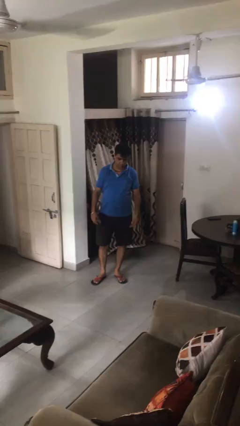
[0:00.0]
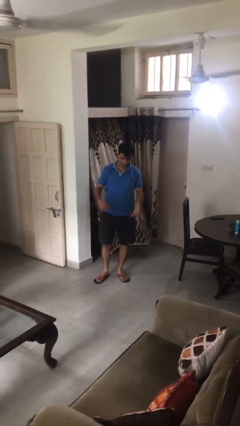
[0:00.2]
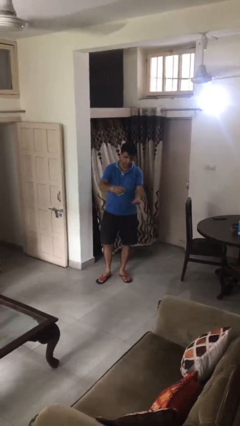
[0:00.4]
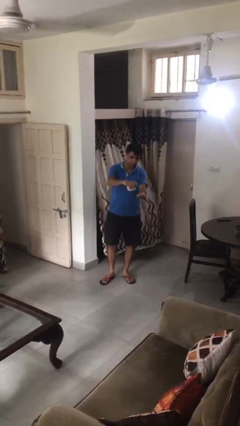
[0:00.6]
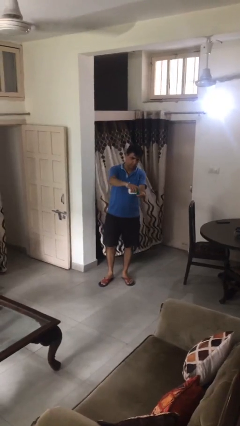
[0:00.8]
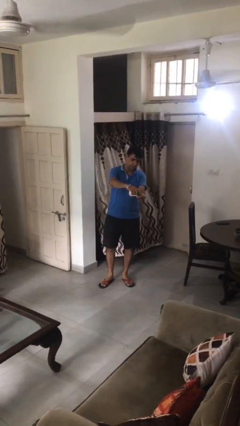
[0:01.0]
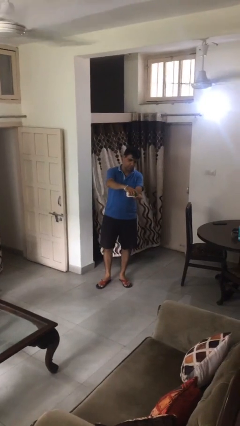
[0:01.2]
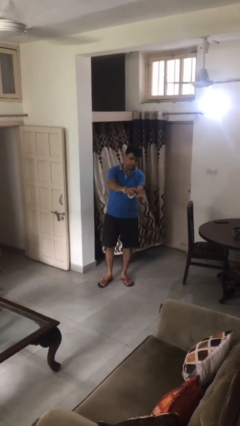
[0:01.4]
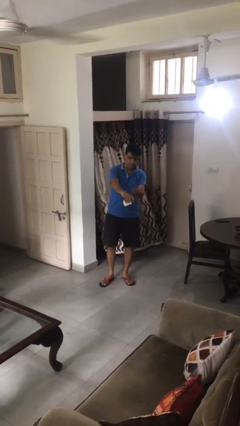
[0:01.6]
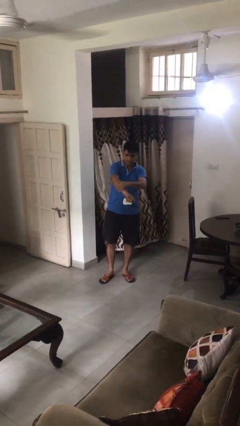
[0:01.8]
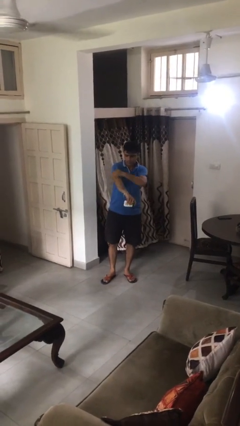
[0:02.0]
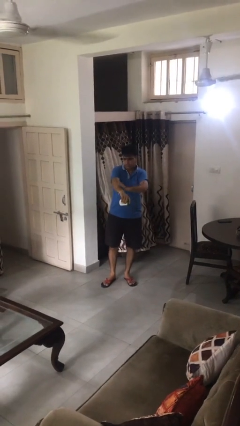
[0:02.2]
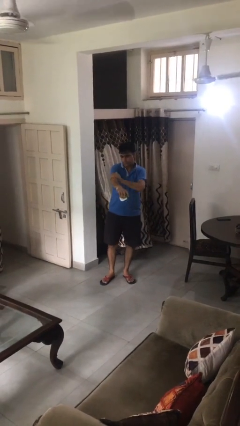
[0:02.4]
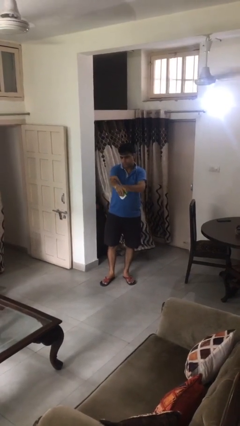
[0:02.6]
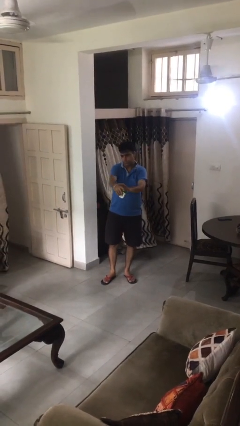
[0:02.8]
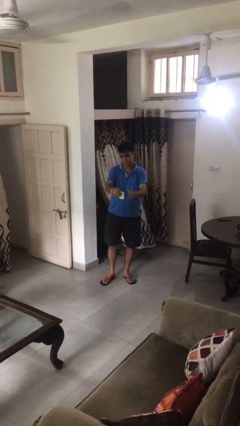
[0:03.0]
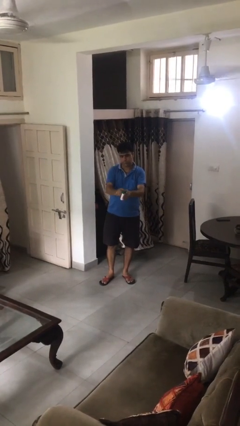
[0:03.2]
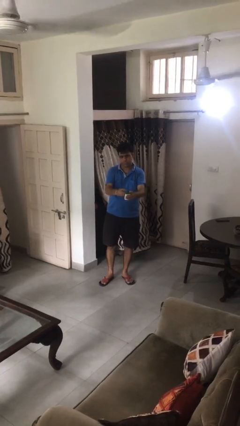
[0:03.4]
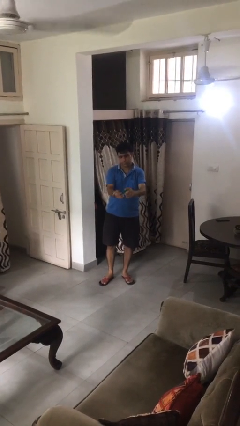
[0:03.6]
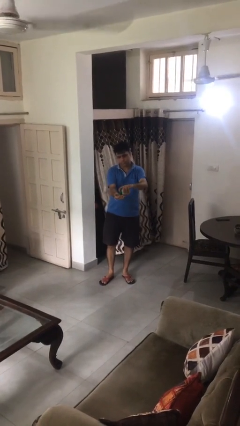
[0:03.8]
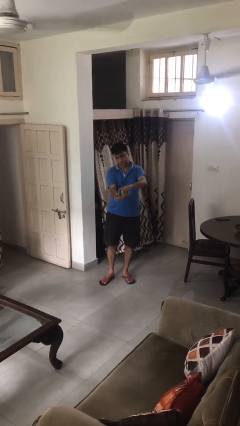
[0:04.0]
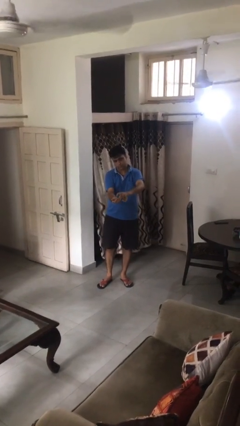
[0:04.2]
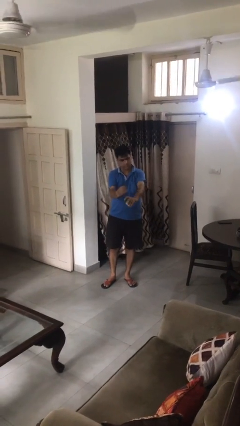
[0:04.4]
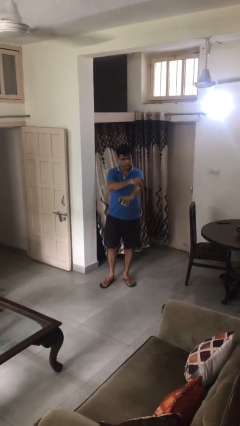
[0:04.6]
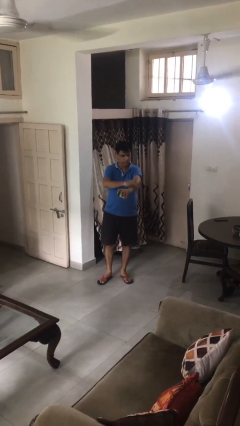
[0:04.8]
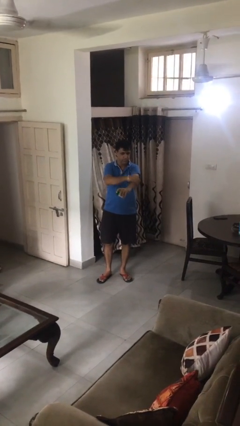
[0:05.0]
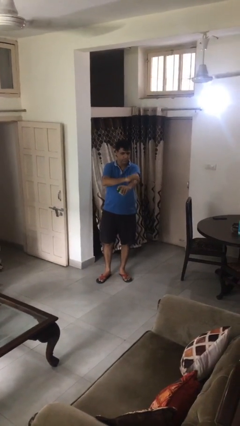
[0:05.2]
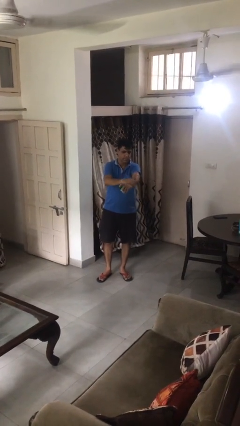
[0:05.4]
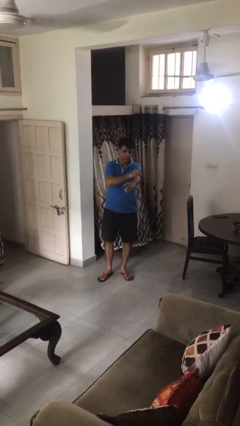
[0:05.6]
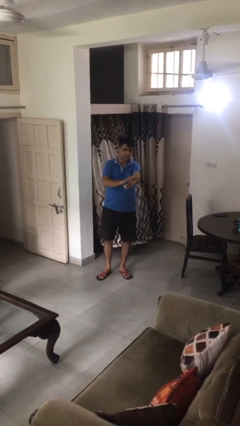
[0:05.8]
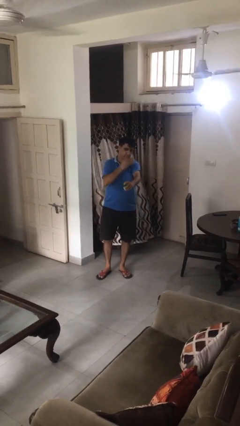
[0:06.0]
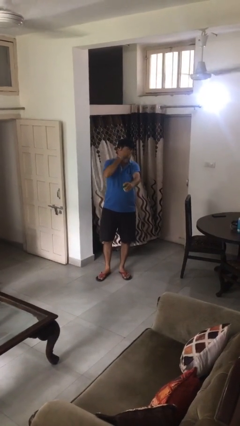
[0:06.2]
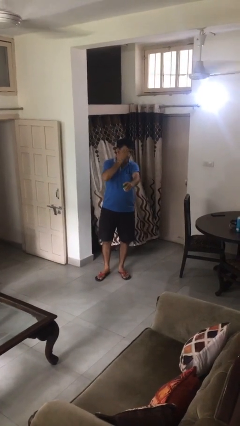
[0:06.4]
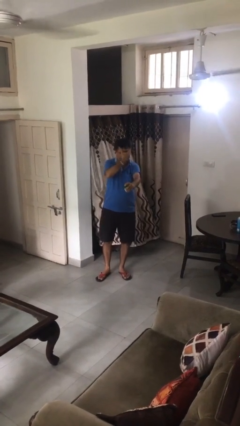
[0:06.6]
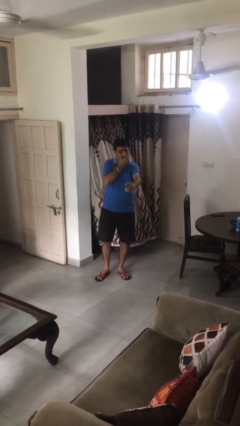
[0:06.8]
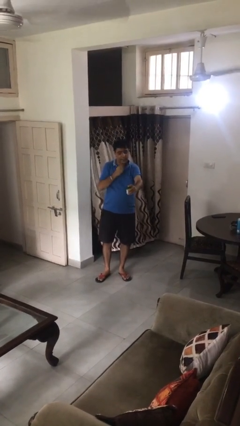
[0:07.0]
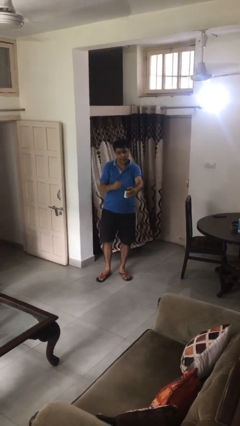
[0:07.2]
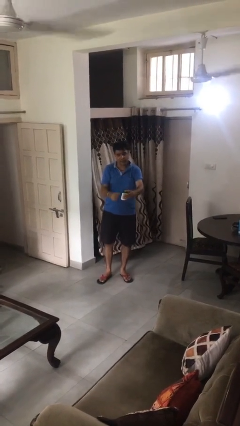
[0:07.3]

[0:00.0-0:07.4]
person applies sunscreen

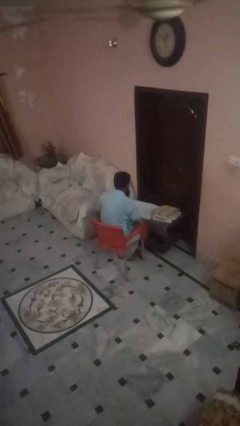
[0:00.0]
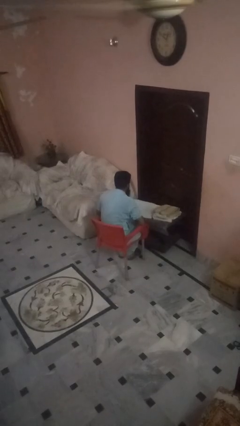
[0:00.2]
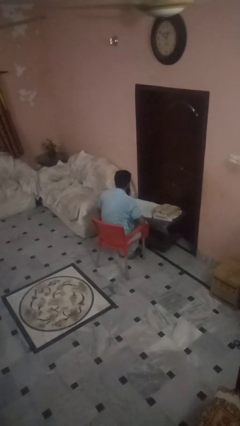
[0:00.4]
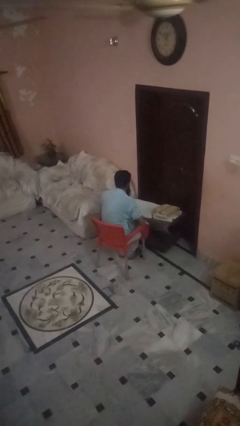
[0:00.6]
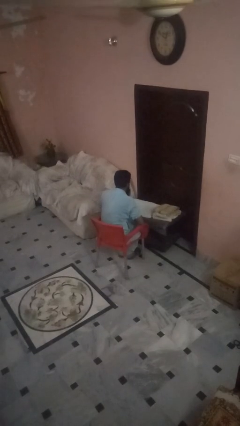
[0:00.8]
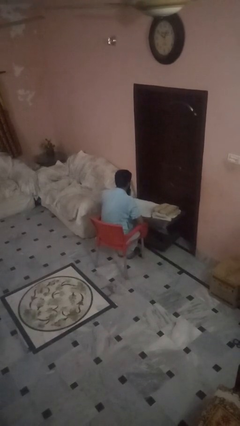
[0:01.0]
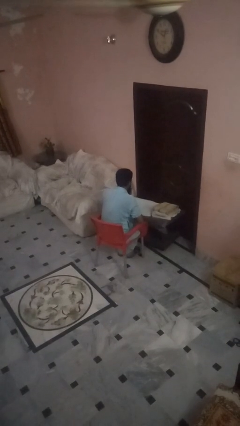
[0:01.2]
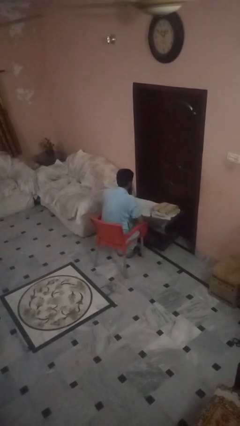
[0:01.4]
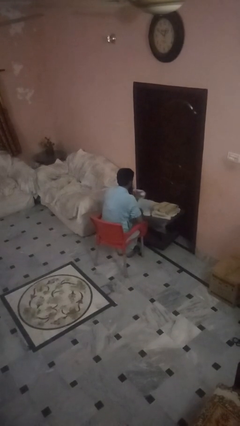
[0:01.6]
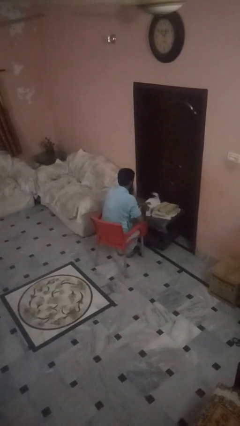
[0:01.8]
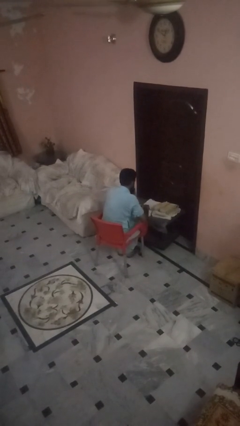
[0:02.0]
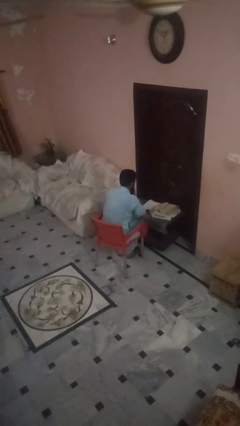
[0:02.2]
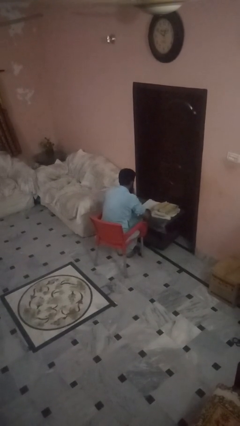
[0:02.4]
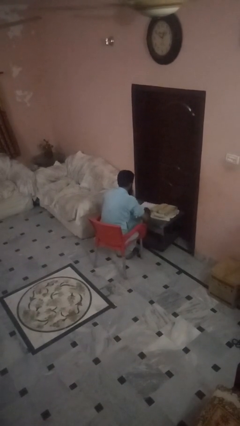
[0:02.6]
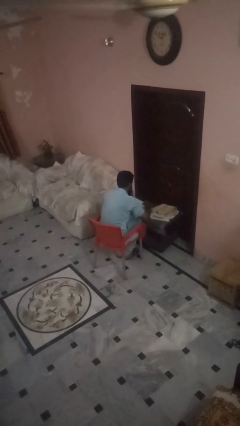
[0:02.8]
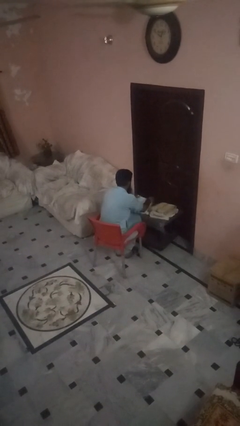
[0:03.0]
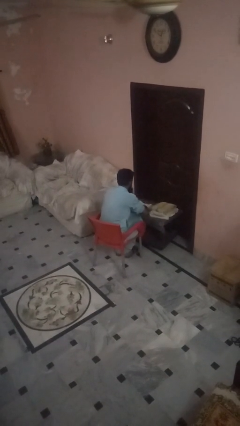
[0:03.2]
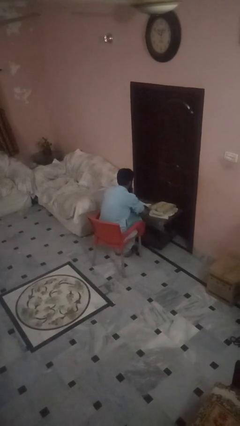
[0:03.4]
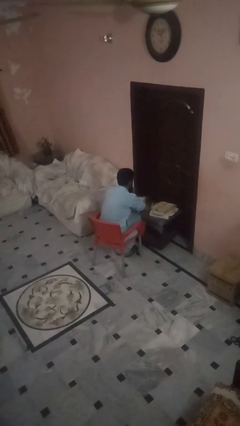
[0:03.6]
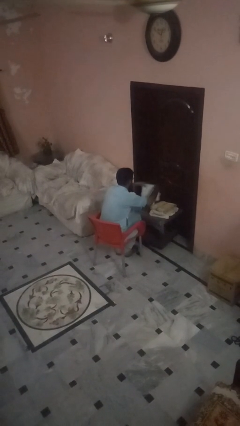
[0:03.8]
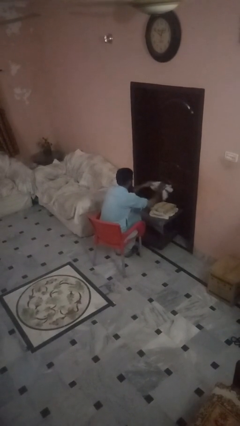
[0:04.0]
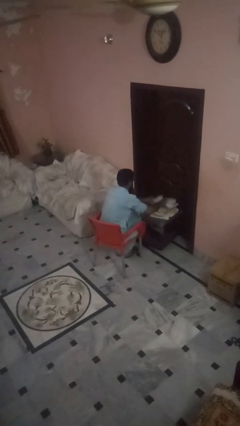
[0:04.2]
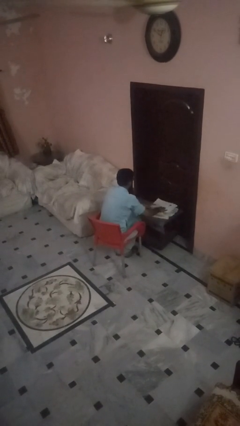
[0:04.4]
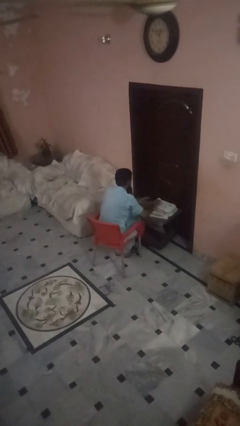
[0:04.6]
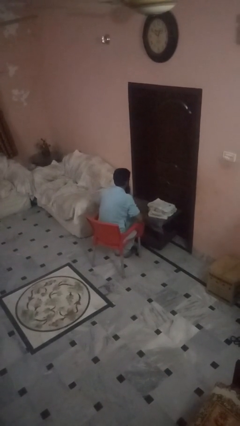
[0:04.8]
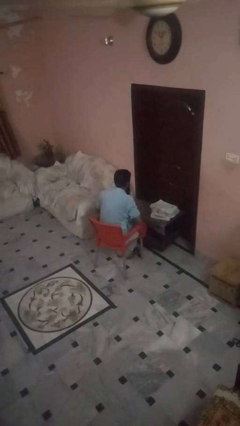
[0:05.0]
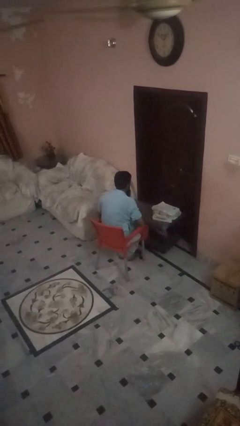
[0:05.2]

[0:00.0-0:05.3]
person folds towel

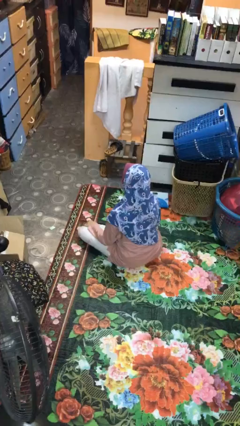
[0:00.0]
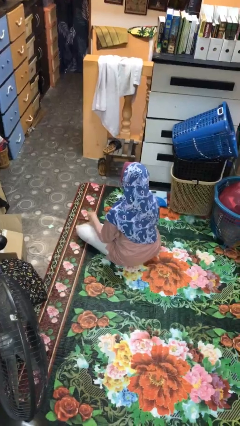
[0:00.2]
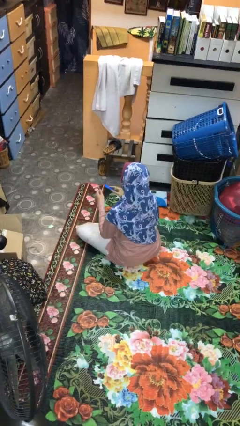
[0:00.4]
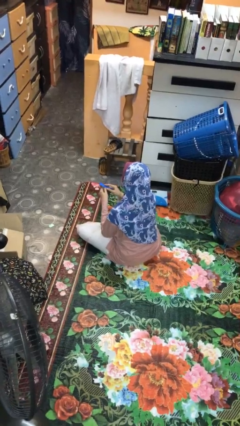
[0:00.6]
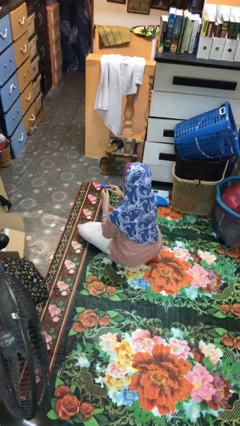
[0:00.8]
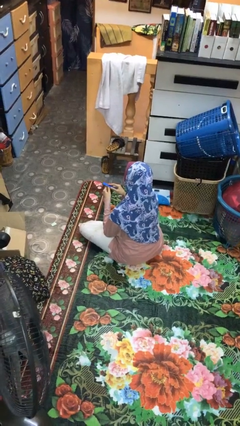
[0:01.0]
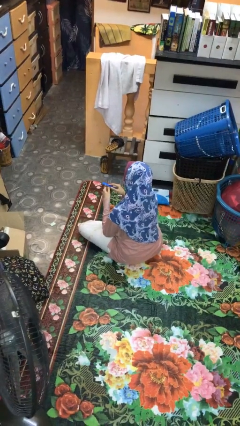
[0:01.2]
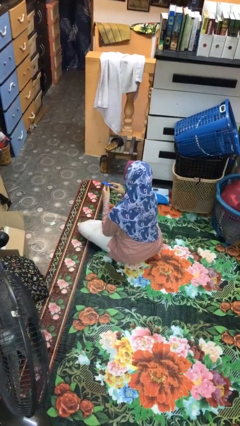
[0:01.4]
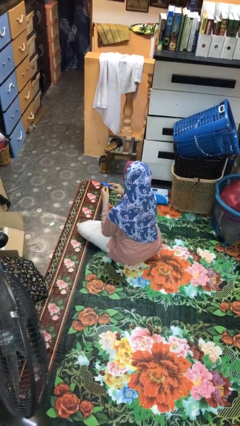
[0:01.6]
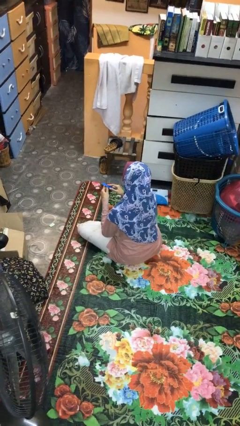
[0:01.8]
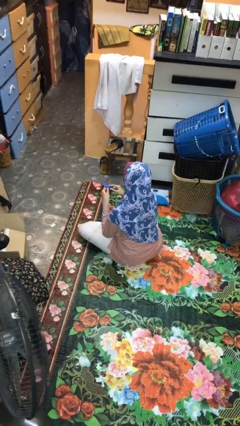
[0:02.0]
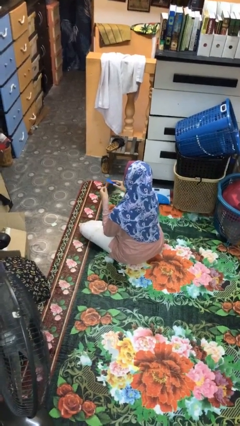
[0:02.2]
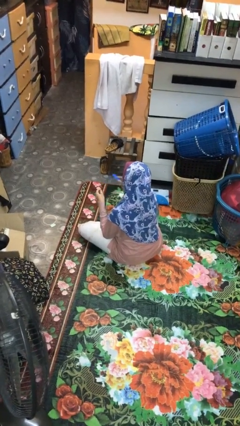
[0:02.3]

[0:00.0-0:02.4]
person files fingernails

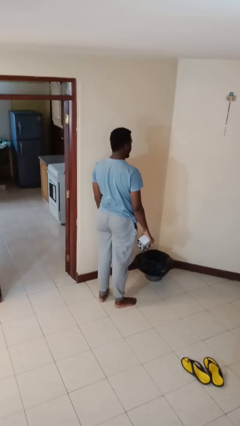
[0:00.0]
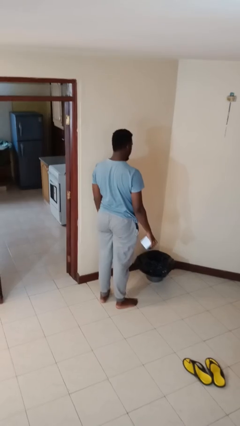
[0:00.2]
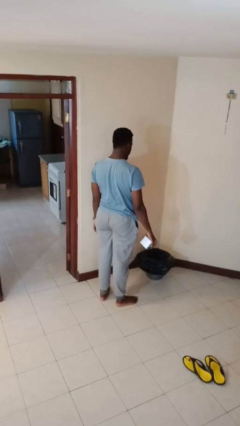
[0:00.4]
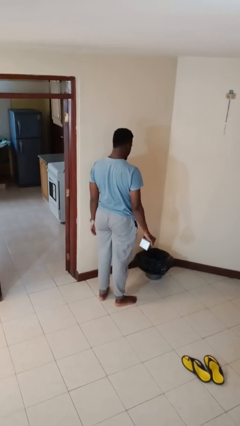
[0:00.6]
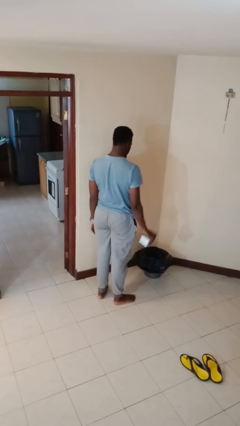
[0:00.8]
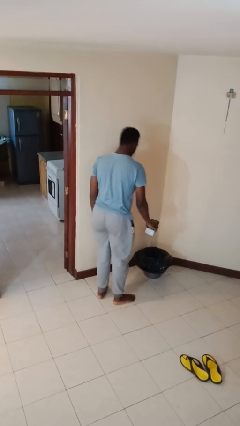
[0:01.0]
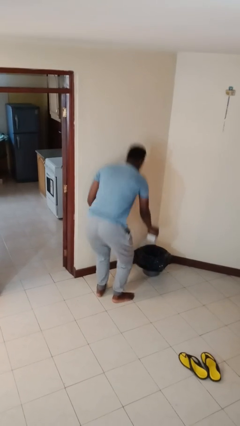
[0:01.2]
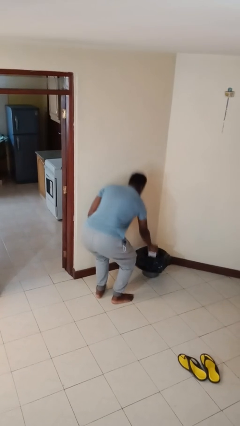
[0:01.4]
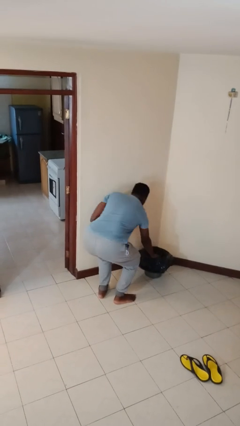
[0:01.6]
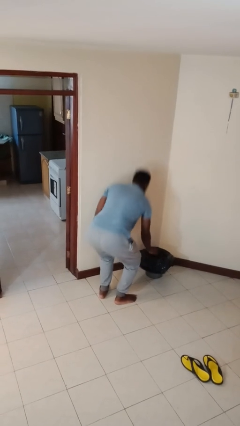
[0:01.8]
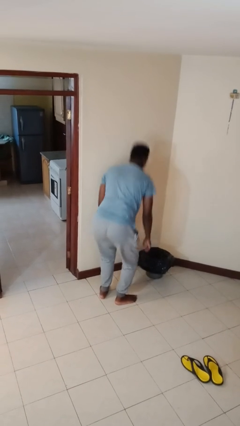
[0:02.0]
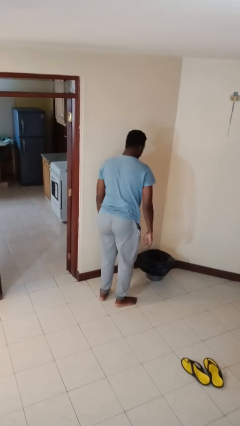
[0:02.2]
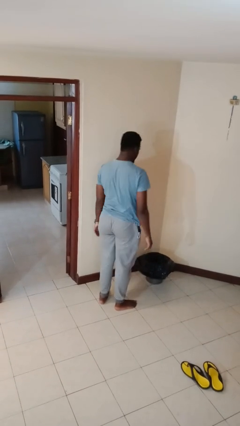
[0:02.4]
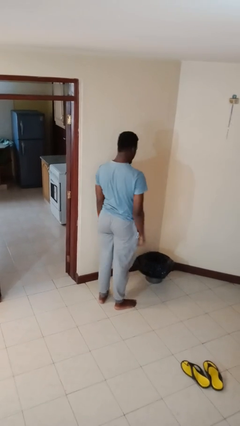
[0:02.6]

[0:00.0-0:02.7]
person discards trash

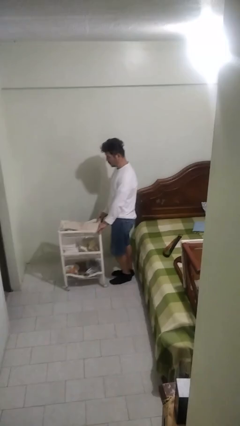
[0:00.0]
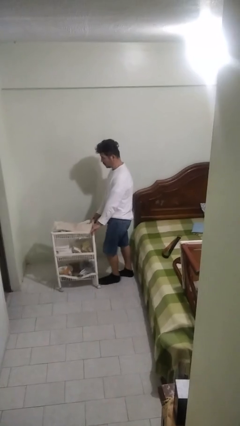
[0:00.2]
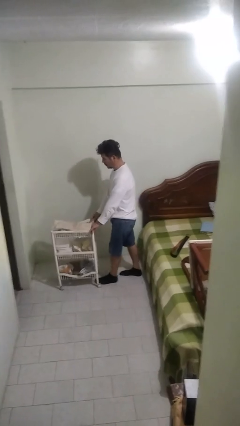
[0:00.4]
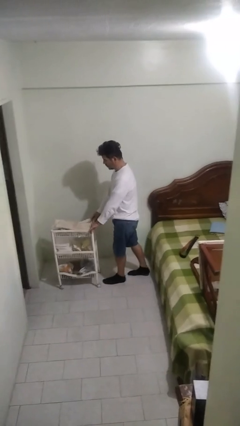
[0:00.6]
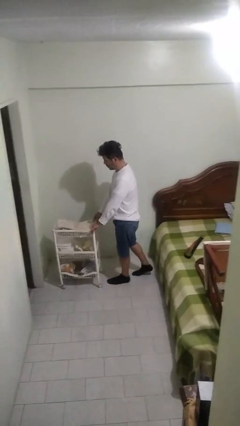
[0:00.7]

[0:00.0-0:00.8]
person pushes wheeled cart
